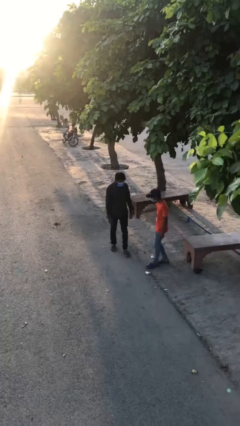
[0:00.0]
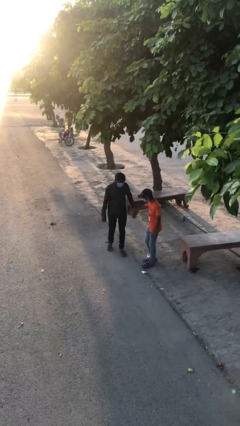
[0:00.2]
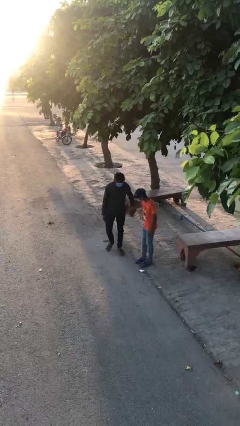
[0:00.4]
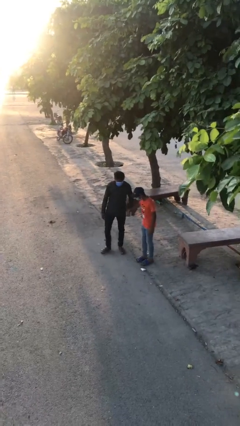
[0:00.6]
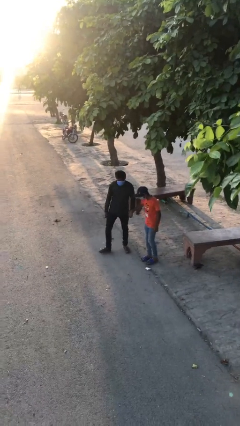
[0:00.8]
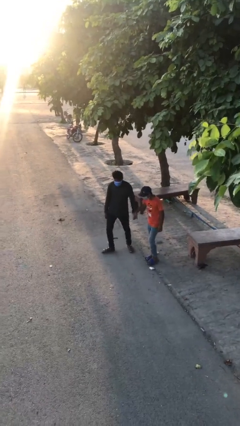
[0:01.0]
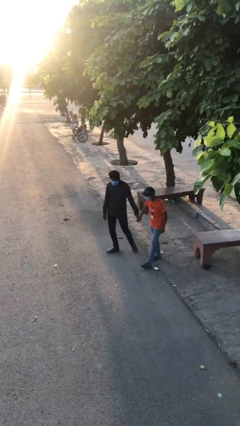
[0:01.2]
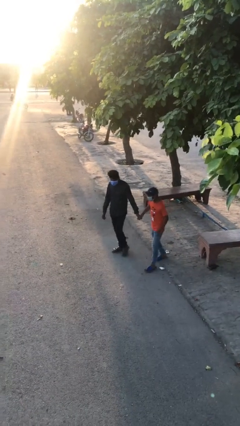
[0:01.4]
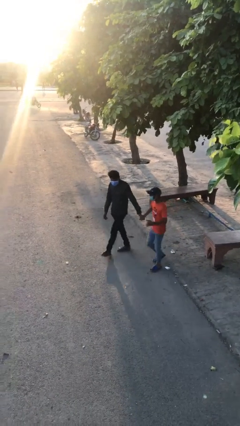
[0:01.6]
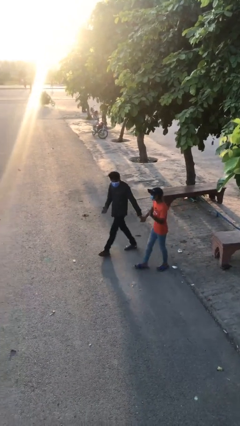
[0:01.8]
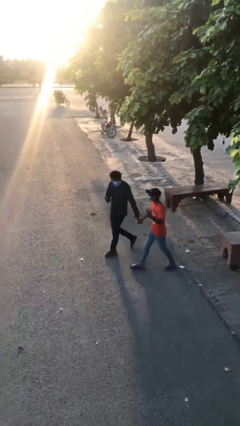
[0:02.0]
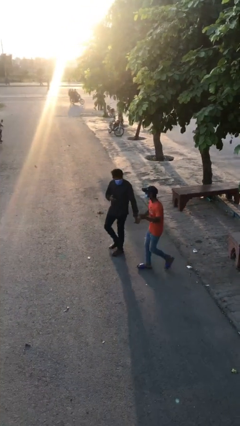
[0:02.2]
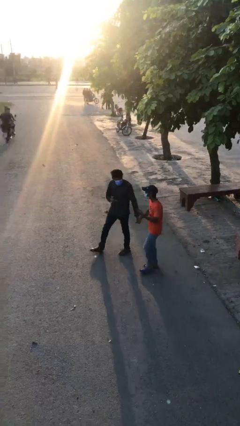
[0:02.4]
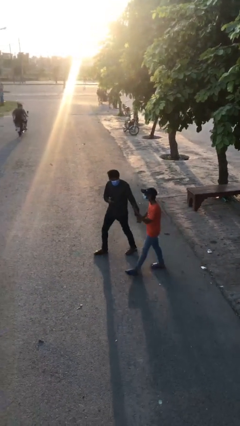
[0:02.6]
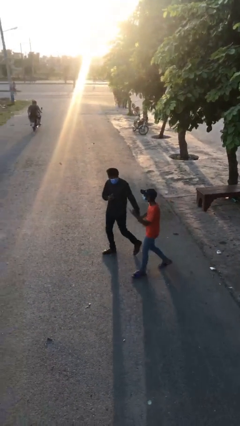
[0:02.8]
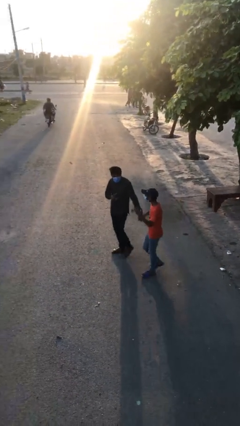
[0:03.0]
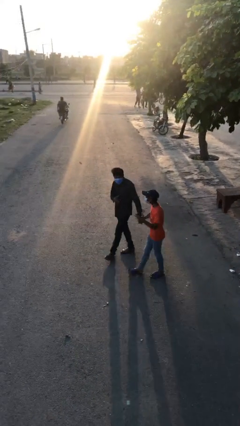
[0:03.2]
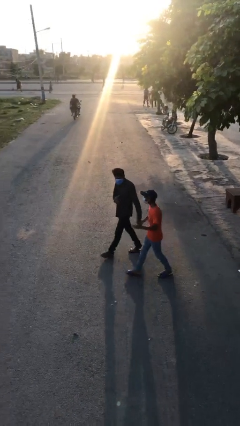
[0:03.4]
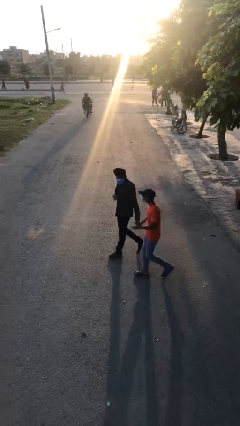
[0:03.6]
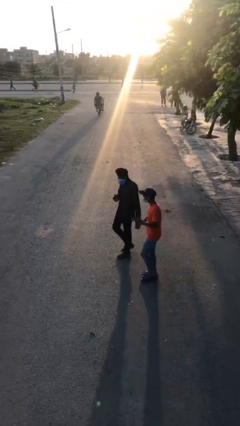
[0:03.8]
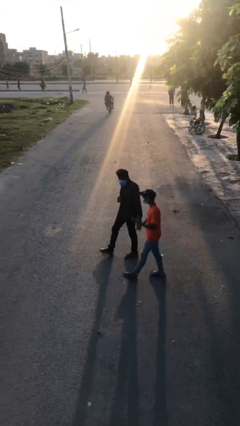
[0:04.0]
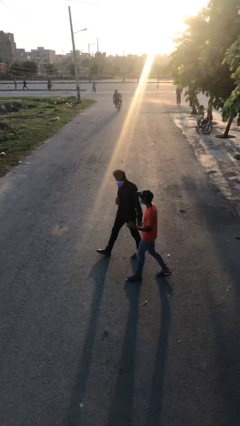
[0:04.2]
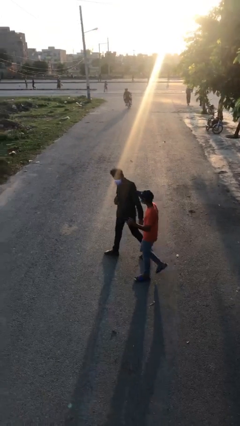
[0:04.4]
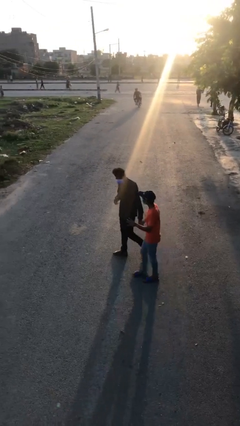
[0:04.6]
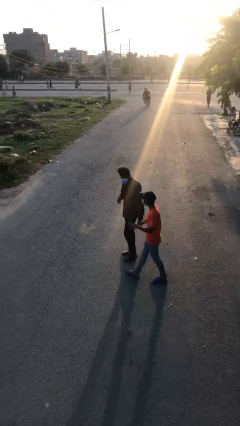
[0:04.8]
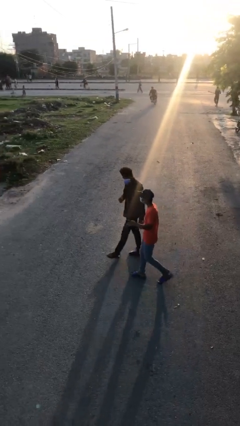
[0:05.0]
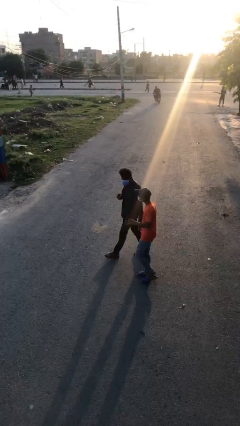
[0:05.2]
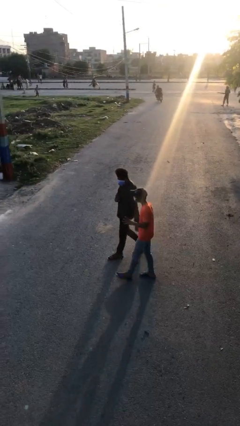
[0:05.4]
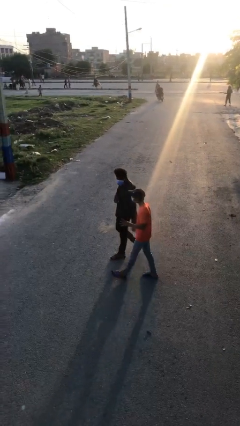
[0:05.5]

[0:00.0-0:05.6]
person holds hand

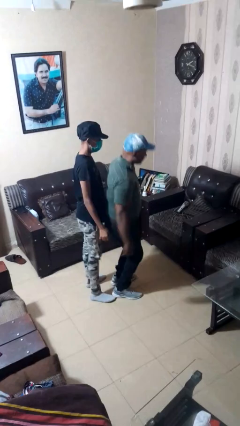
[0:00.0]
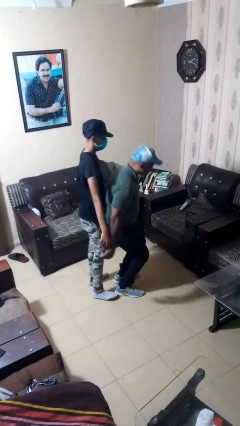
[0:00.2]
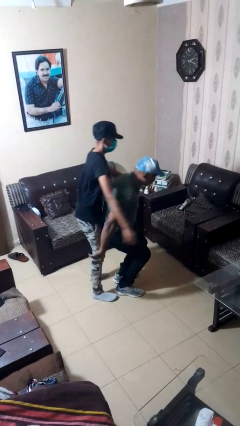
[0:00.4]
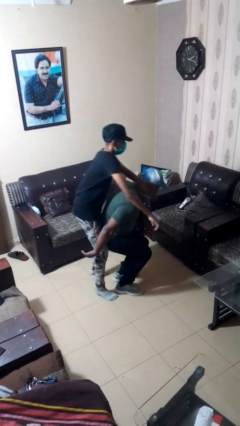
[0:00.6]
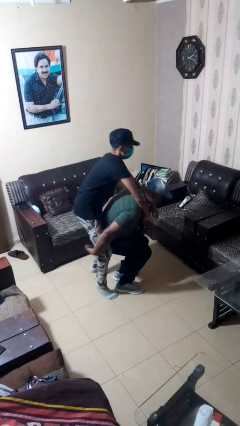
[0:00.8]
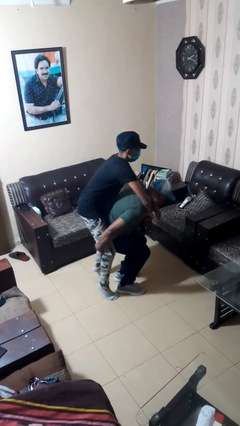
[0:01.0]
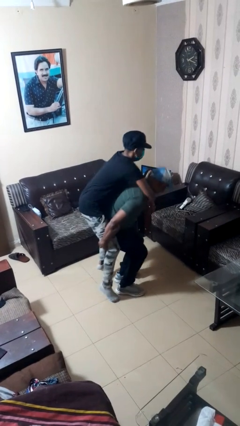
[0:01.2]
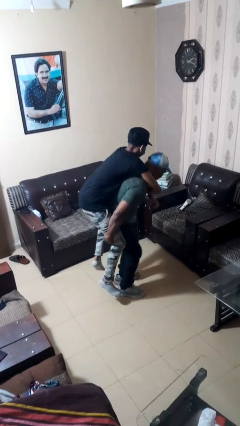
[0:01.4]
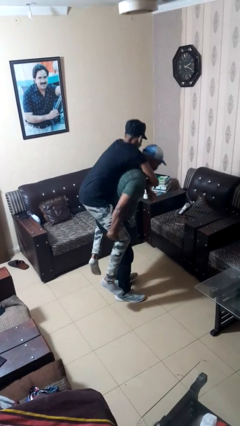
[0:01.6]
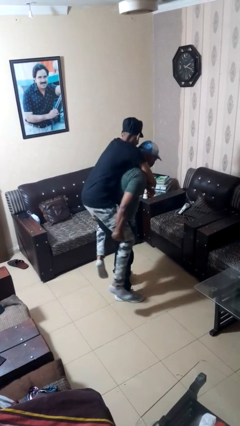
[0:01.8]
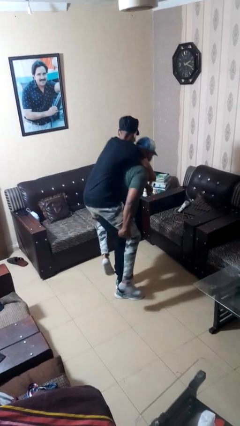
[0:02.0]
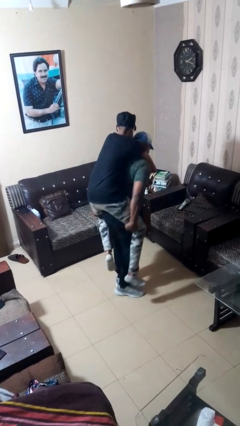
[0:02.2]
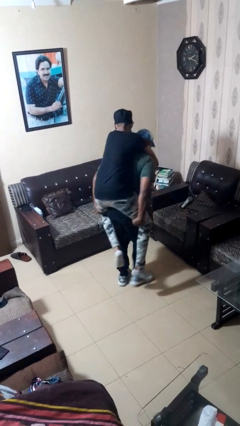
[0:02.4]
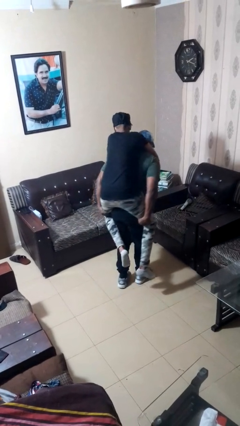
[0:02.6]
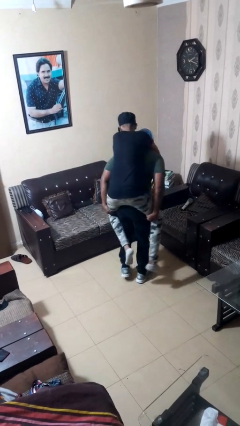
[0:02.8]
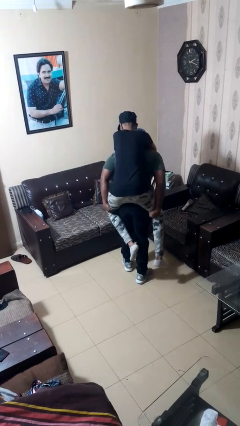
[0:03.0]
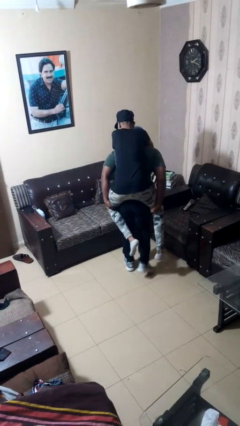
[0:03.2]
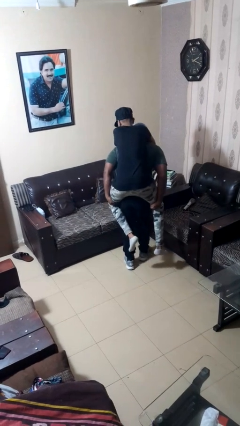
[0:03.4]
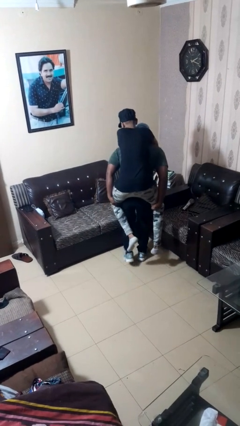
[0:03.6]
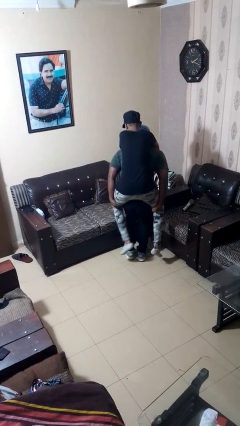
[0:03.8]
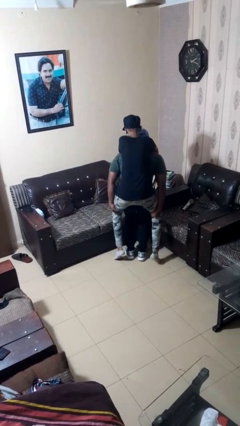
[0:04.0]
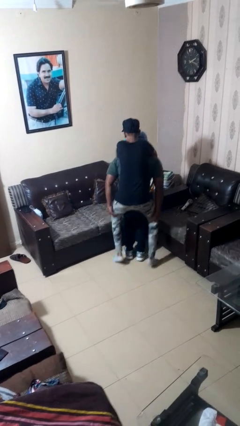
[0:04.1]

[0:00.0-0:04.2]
person carries person on back

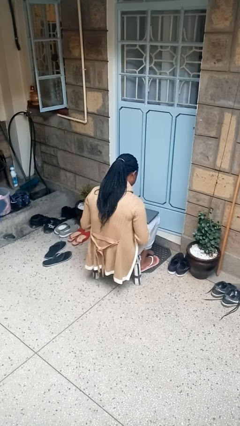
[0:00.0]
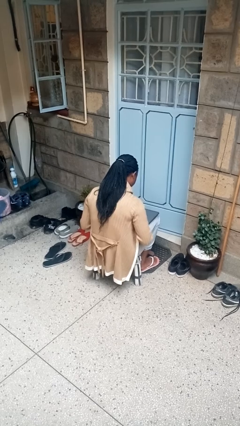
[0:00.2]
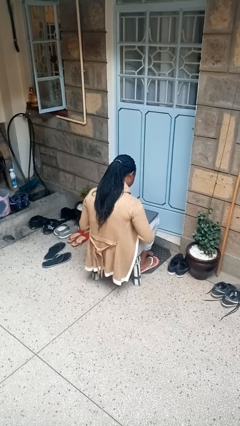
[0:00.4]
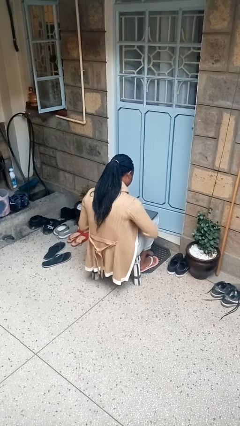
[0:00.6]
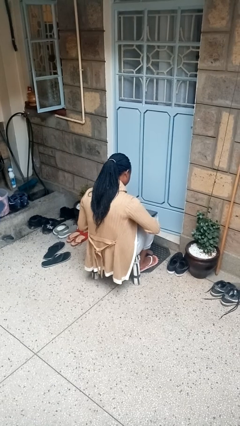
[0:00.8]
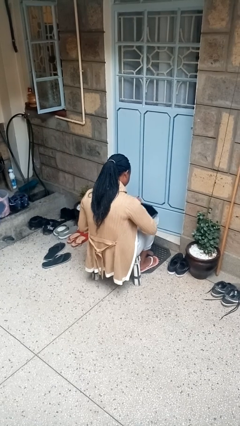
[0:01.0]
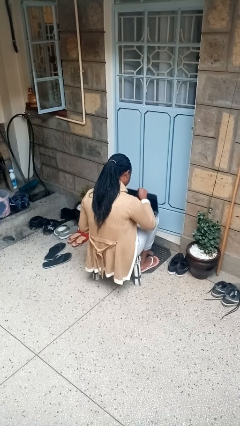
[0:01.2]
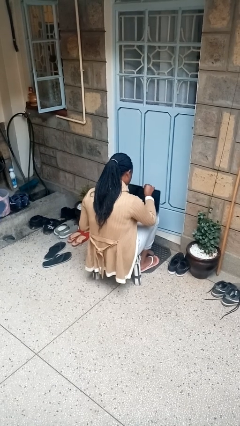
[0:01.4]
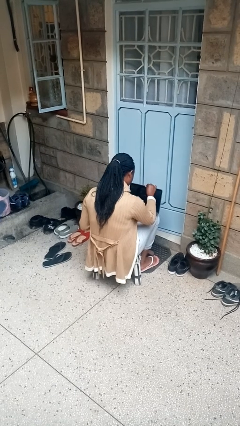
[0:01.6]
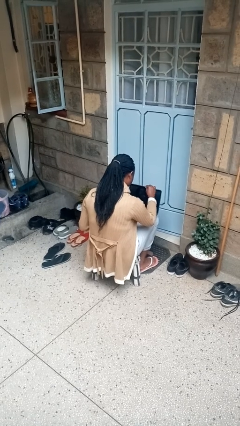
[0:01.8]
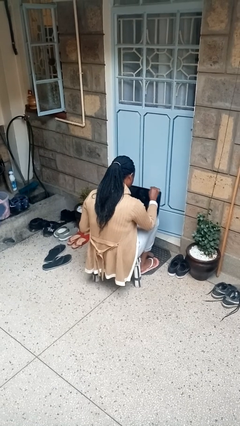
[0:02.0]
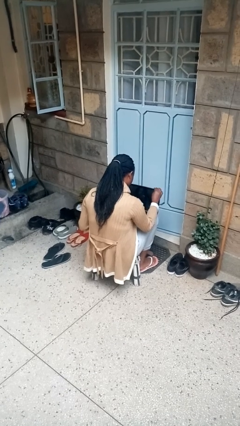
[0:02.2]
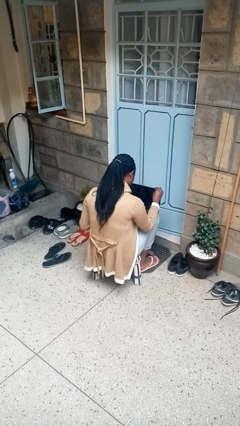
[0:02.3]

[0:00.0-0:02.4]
person opens laptop

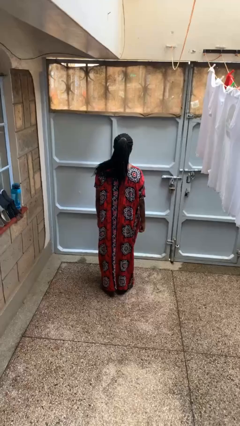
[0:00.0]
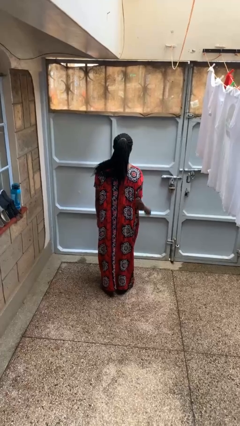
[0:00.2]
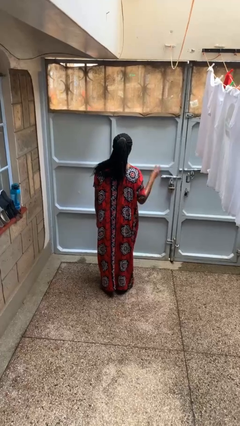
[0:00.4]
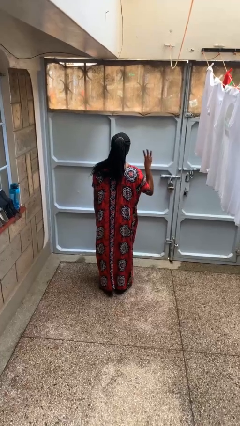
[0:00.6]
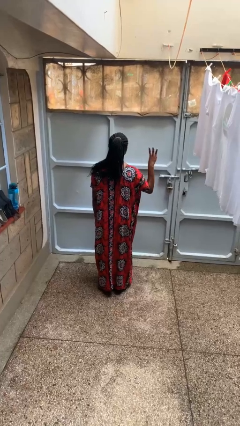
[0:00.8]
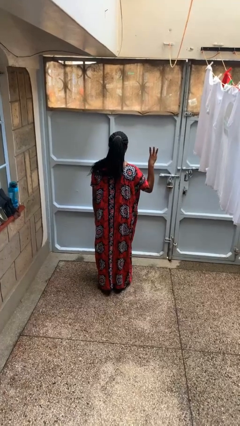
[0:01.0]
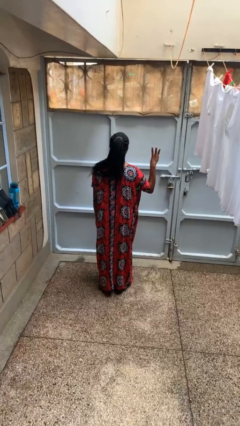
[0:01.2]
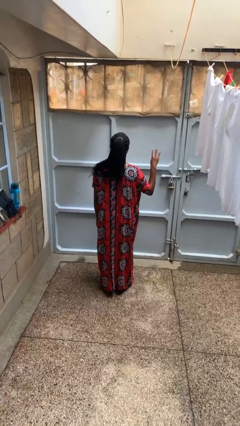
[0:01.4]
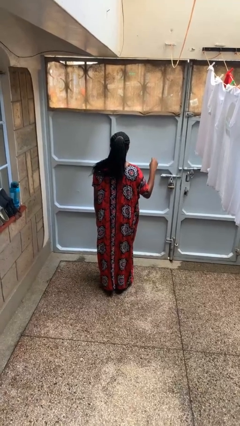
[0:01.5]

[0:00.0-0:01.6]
person gestures number three

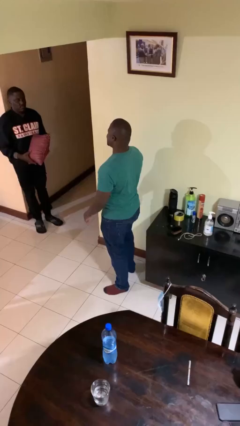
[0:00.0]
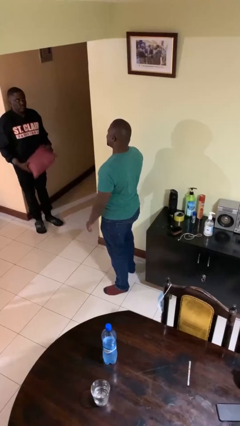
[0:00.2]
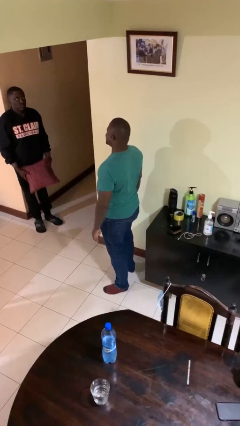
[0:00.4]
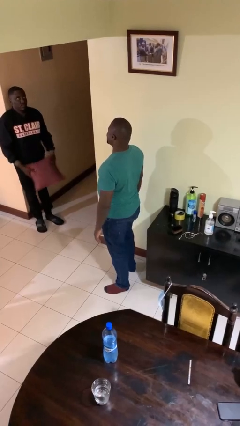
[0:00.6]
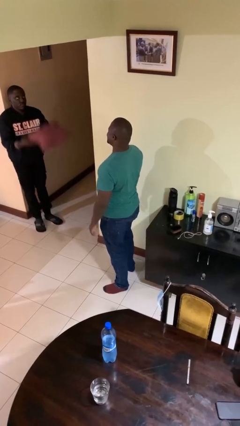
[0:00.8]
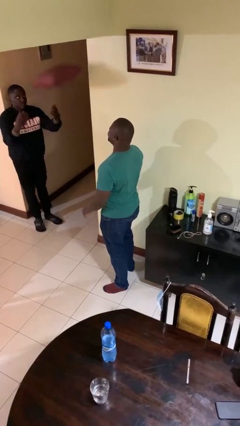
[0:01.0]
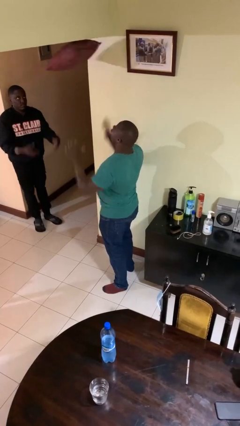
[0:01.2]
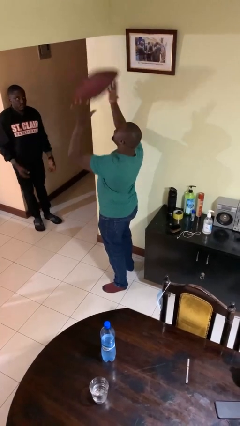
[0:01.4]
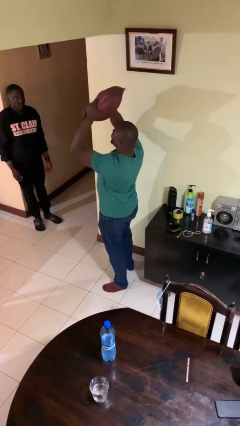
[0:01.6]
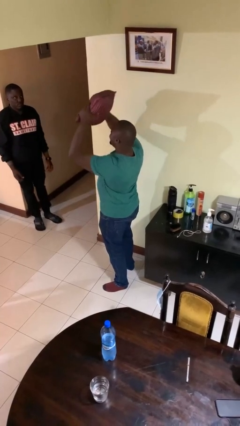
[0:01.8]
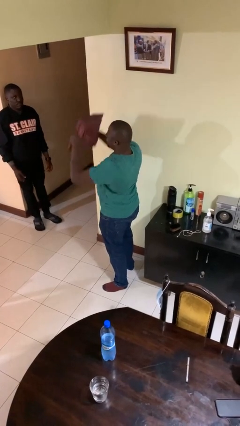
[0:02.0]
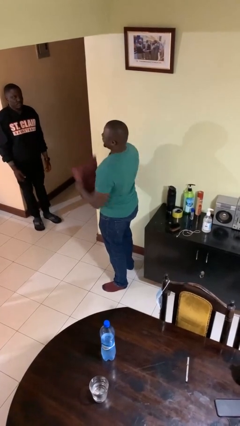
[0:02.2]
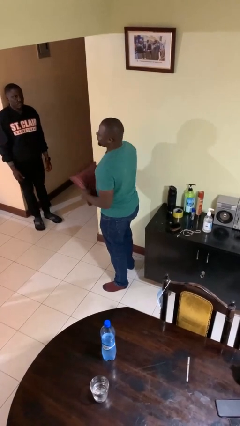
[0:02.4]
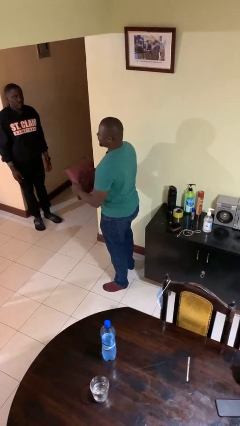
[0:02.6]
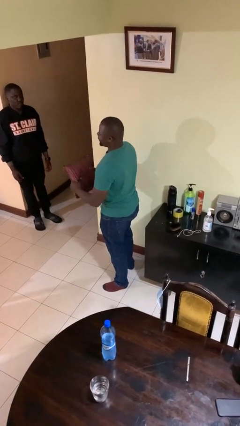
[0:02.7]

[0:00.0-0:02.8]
person catches object from person

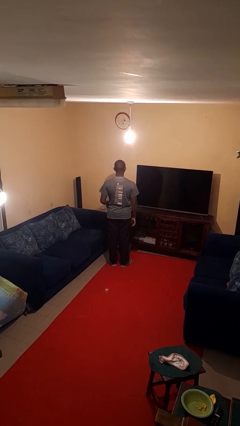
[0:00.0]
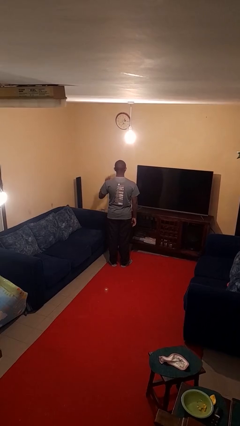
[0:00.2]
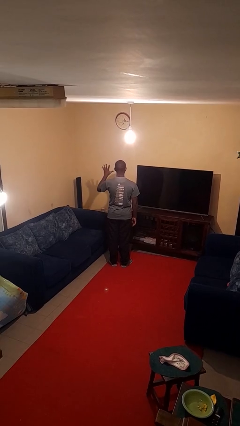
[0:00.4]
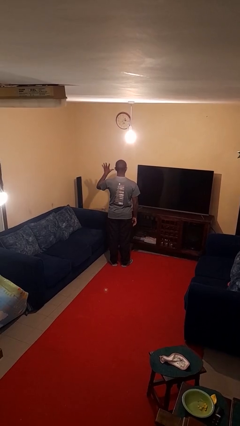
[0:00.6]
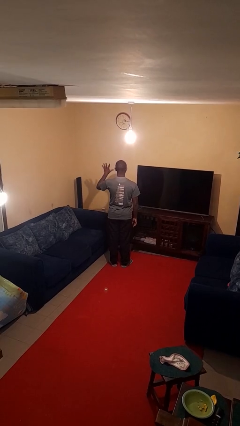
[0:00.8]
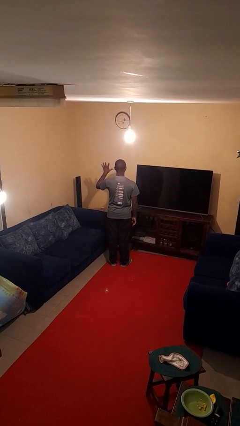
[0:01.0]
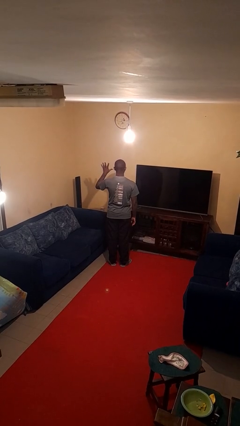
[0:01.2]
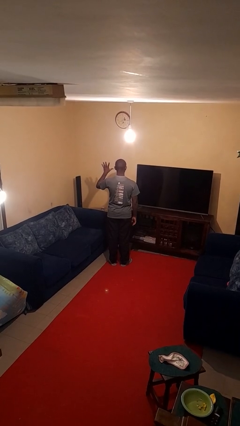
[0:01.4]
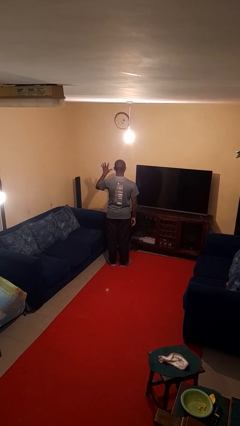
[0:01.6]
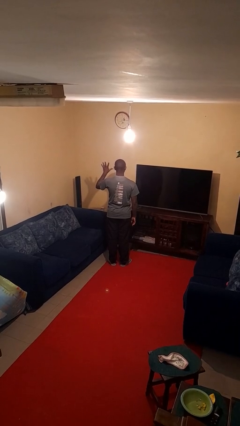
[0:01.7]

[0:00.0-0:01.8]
person gestures number five
